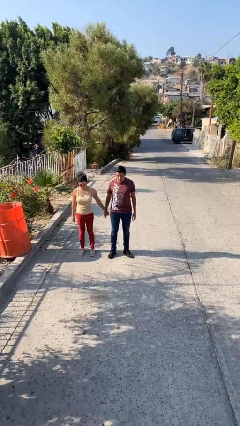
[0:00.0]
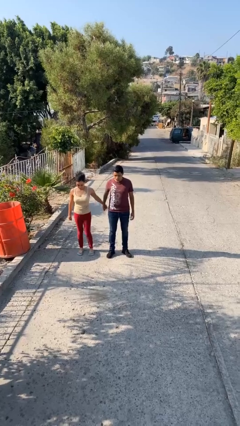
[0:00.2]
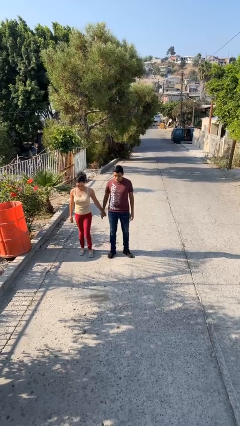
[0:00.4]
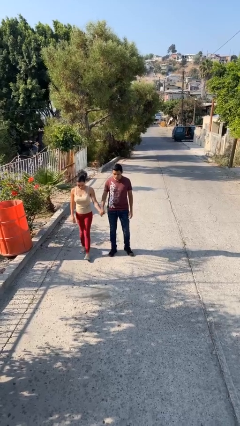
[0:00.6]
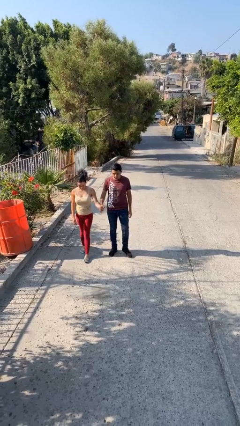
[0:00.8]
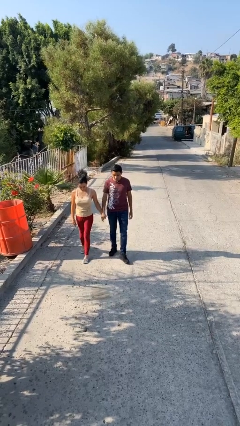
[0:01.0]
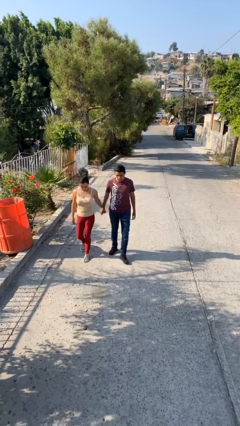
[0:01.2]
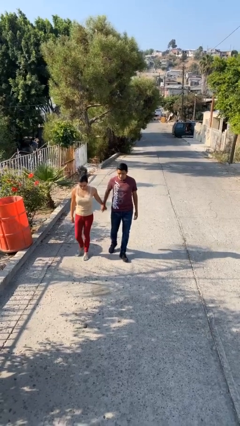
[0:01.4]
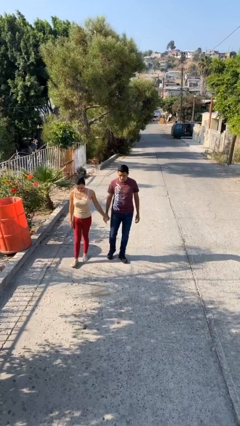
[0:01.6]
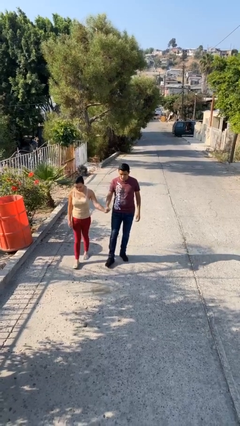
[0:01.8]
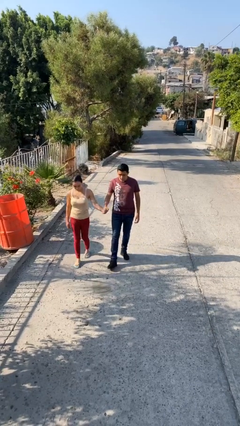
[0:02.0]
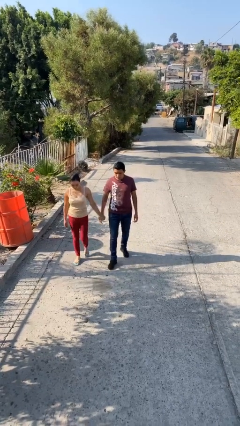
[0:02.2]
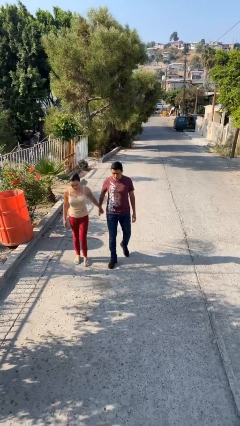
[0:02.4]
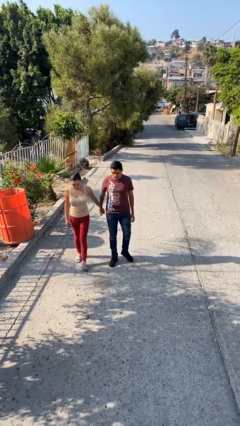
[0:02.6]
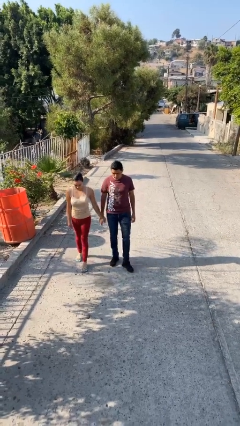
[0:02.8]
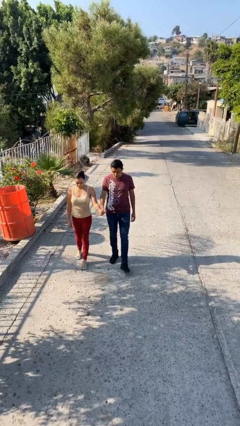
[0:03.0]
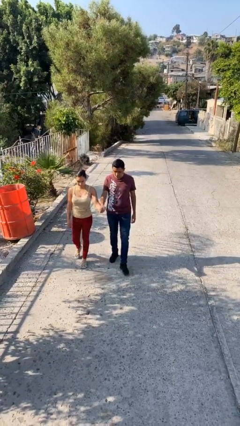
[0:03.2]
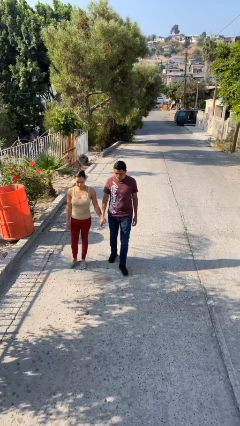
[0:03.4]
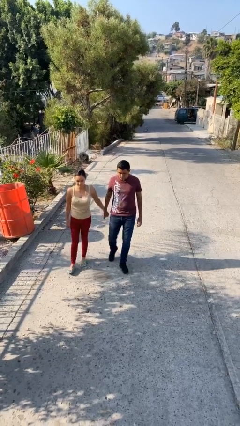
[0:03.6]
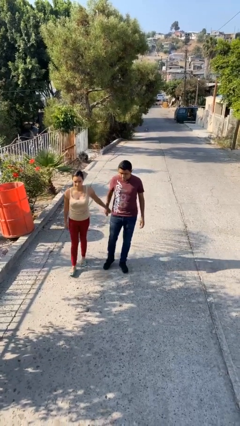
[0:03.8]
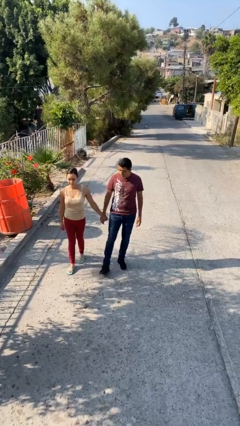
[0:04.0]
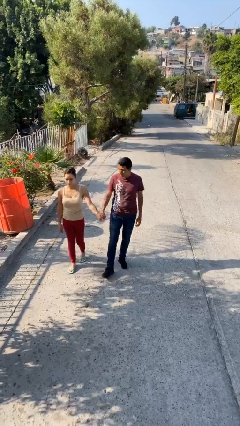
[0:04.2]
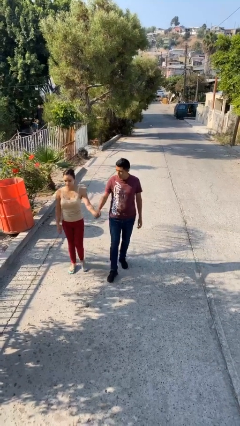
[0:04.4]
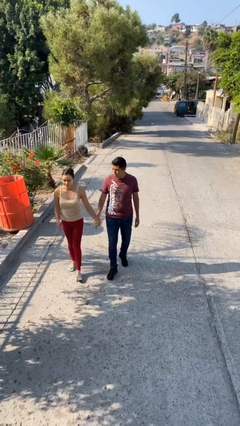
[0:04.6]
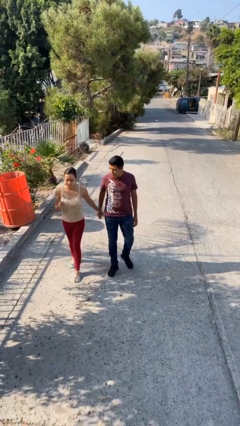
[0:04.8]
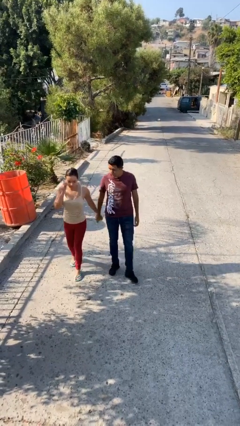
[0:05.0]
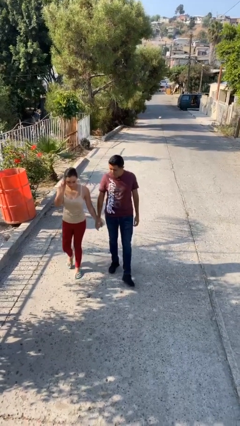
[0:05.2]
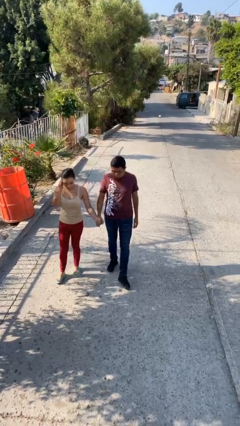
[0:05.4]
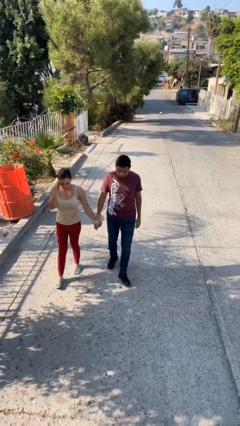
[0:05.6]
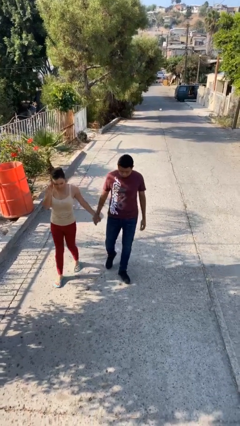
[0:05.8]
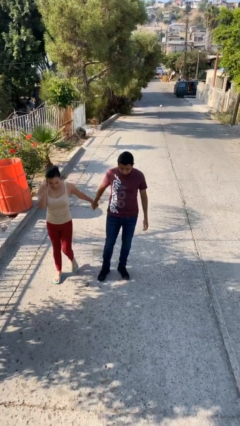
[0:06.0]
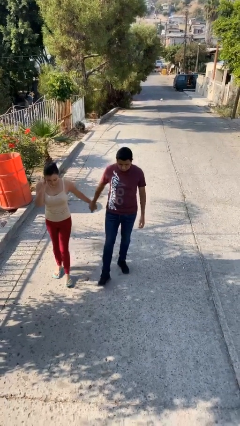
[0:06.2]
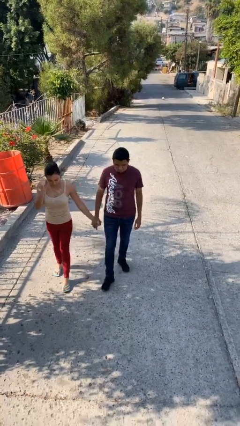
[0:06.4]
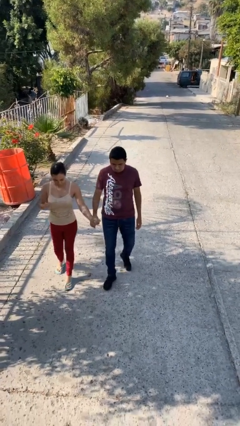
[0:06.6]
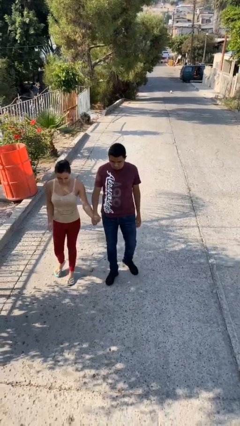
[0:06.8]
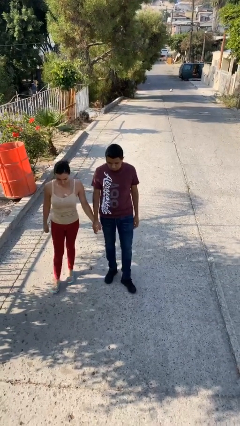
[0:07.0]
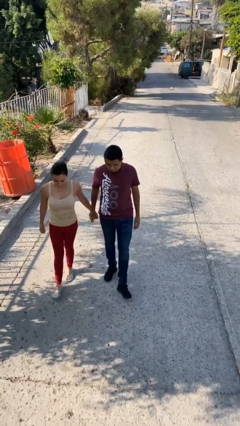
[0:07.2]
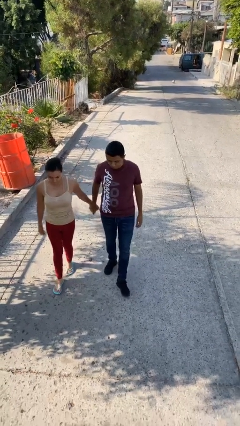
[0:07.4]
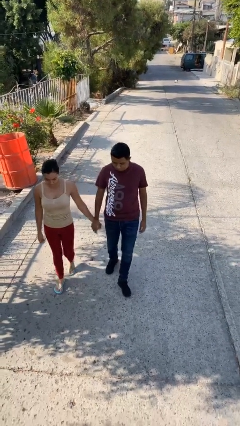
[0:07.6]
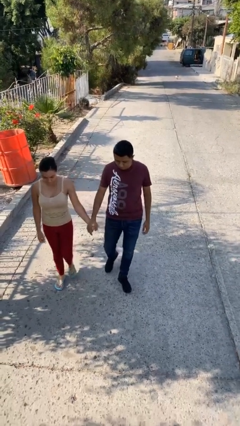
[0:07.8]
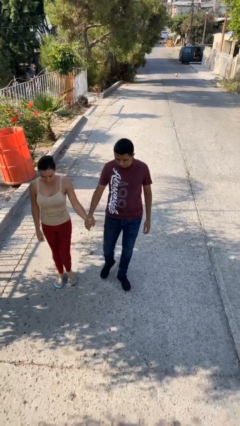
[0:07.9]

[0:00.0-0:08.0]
person holds hand

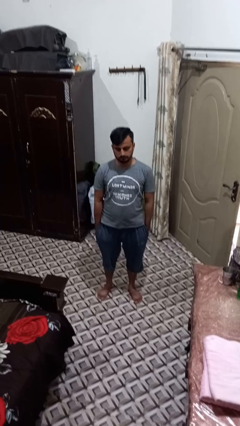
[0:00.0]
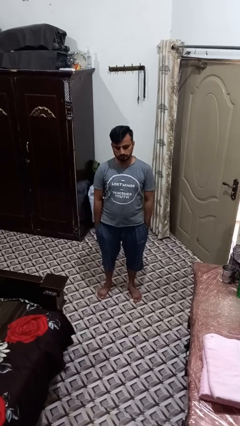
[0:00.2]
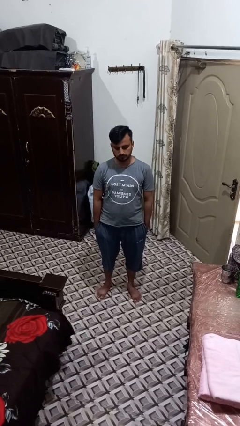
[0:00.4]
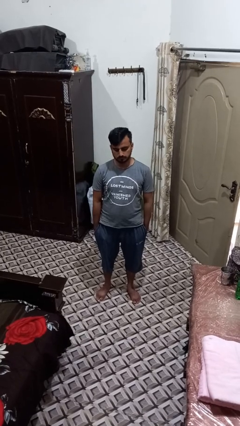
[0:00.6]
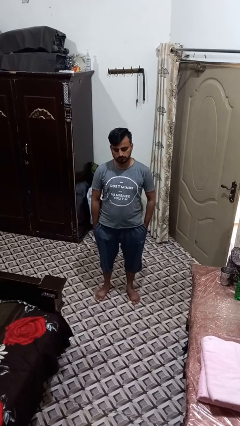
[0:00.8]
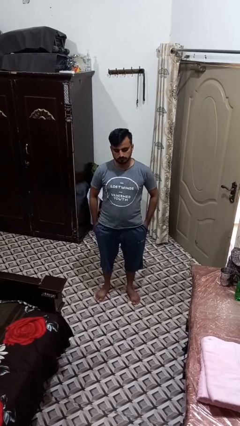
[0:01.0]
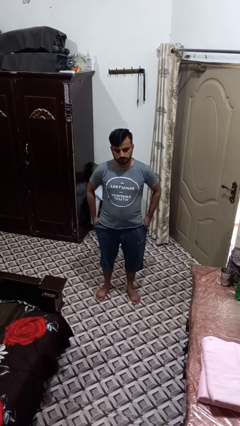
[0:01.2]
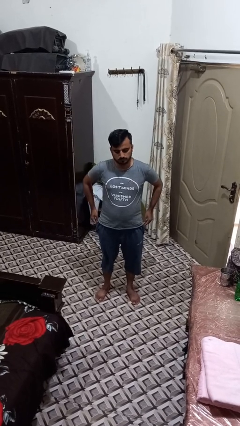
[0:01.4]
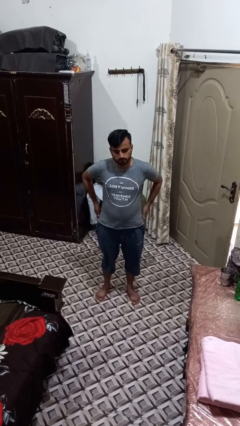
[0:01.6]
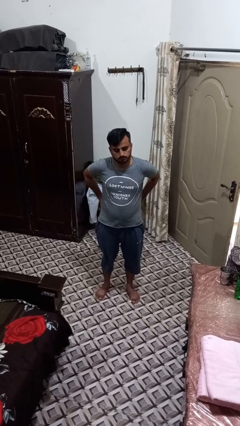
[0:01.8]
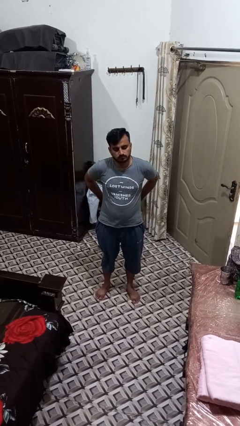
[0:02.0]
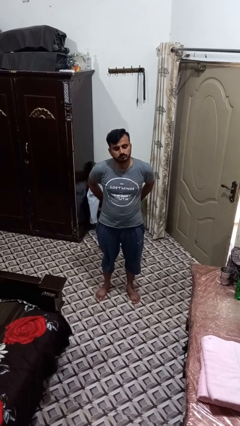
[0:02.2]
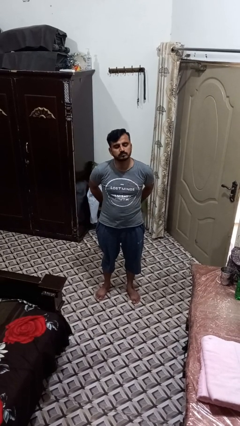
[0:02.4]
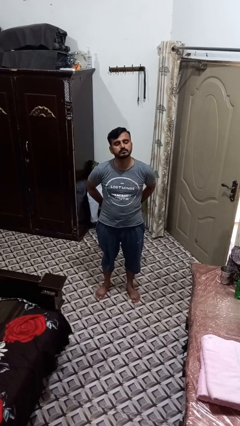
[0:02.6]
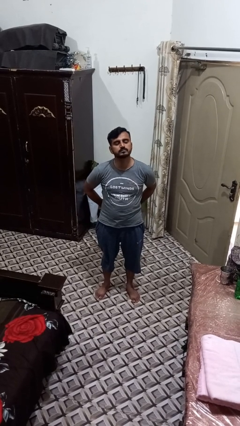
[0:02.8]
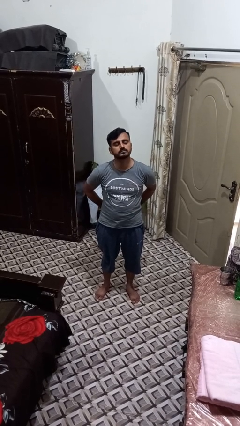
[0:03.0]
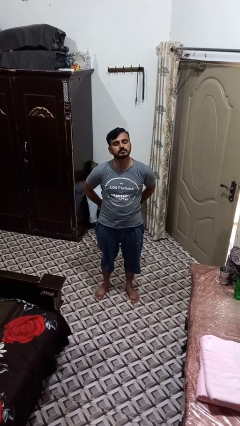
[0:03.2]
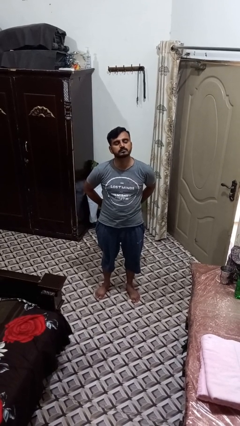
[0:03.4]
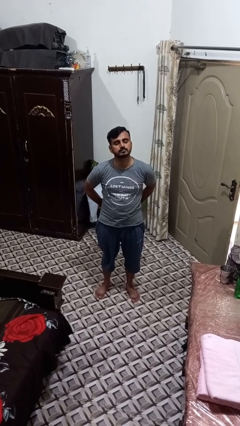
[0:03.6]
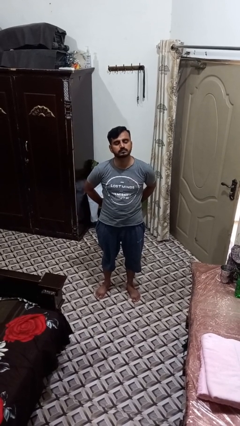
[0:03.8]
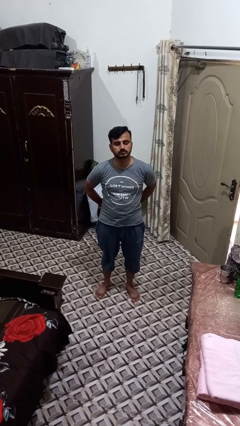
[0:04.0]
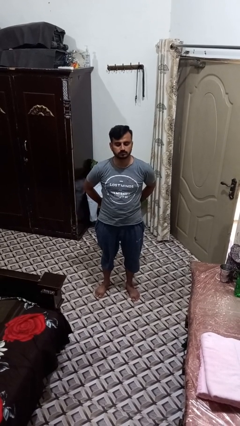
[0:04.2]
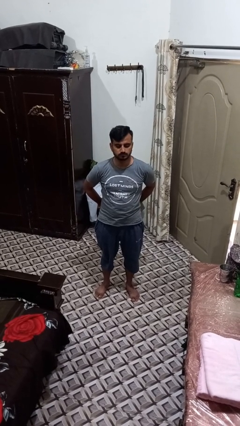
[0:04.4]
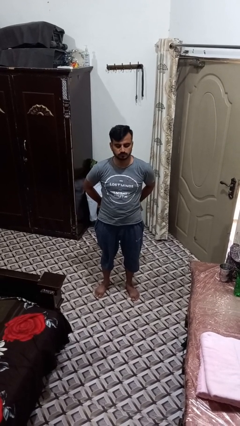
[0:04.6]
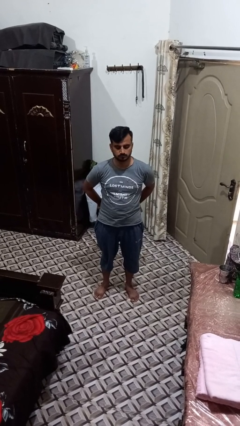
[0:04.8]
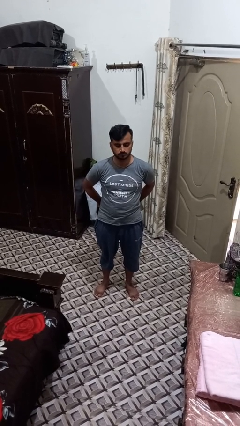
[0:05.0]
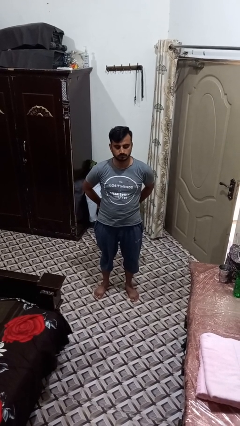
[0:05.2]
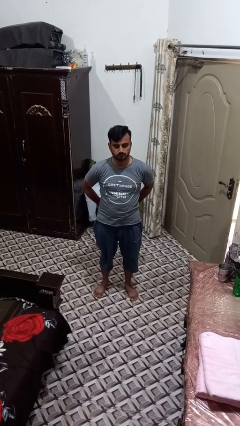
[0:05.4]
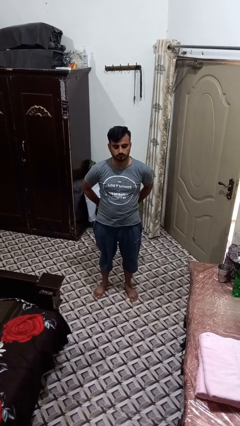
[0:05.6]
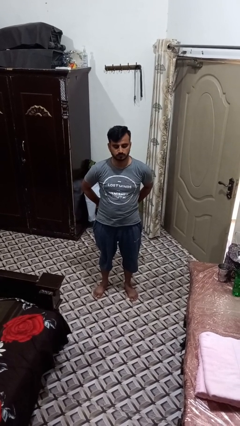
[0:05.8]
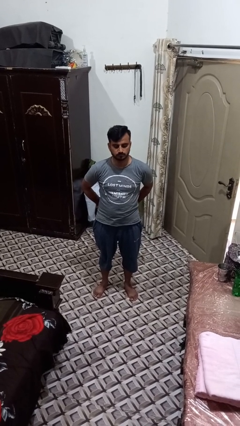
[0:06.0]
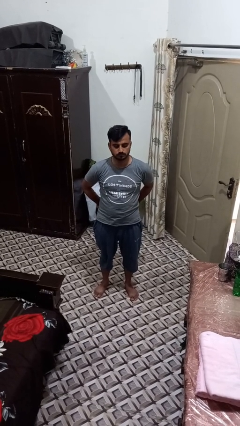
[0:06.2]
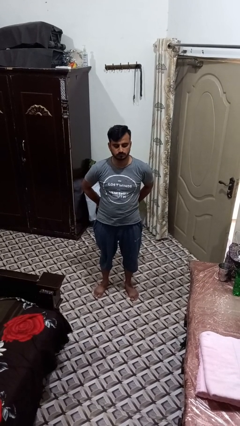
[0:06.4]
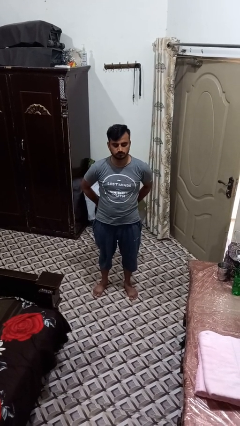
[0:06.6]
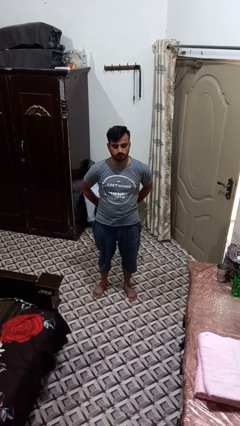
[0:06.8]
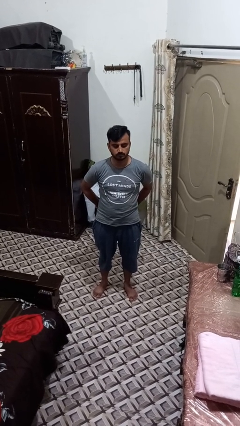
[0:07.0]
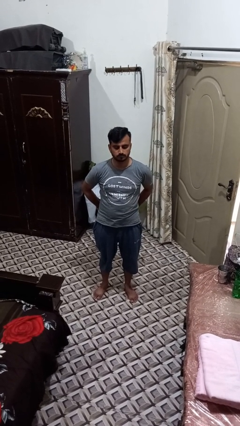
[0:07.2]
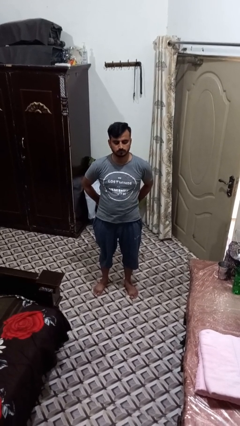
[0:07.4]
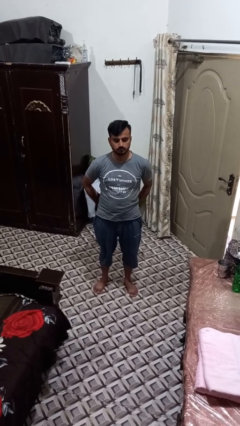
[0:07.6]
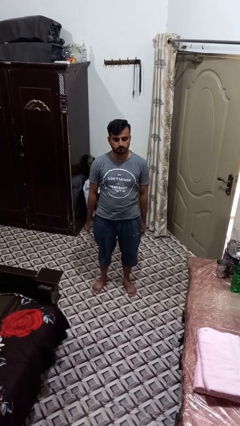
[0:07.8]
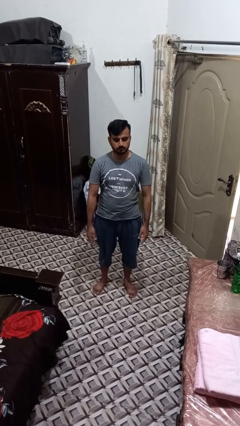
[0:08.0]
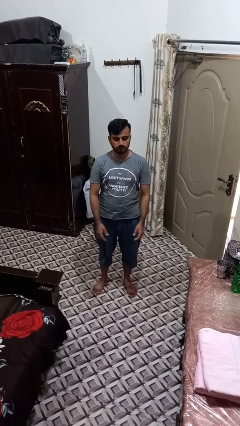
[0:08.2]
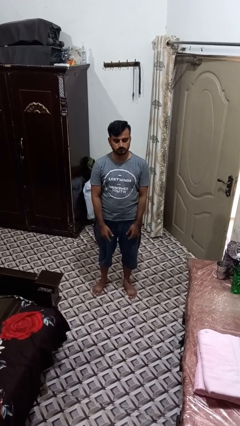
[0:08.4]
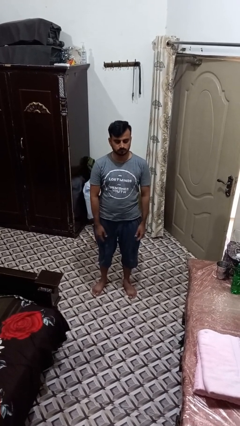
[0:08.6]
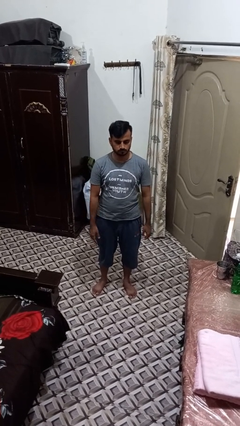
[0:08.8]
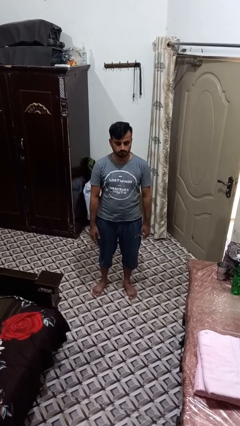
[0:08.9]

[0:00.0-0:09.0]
person puts hands in back pockets

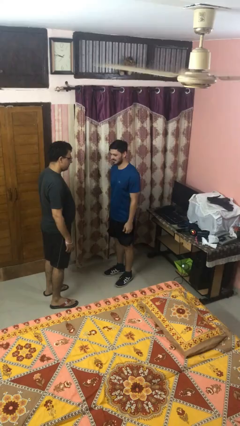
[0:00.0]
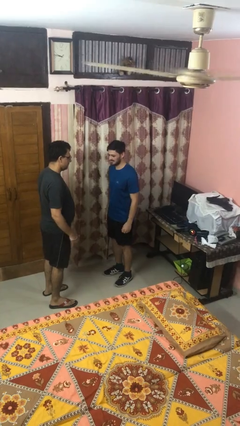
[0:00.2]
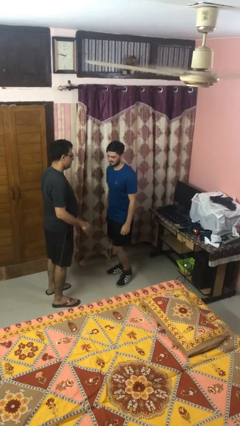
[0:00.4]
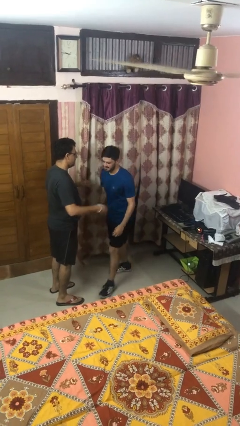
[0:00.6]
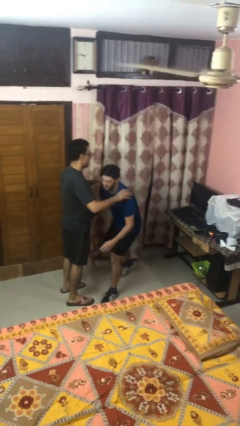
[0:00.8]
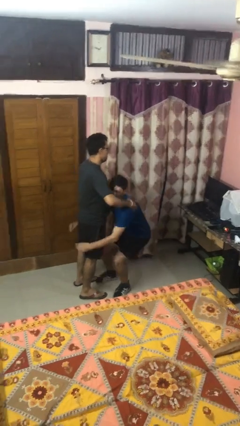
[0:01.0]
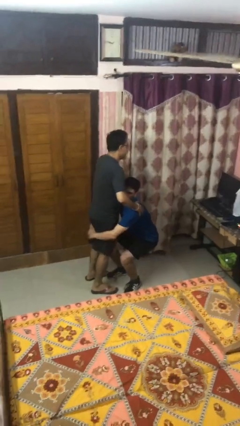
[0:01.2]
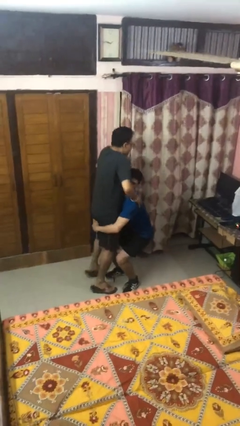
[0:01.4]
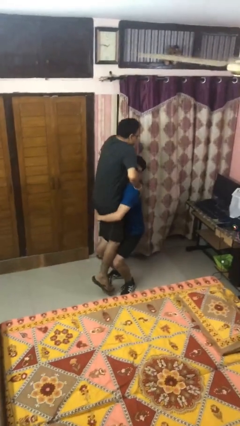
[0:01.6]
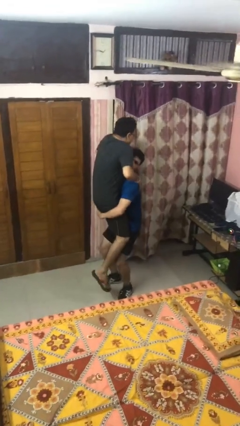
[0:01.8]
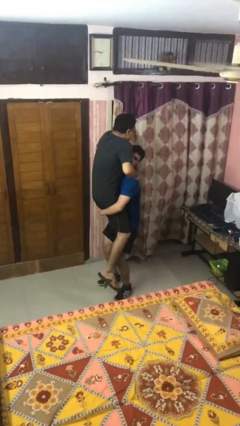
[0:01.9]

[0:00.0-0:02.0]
person picks up person
